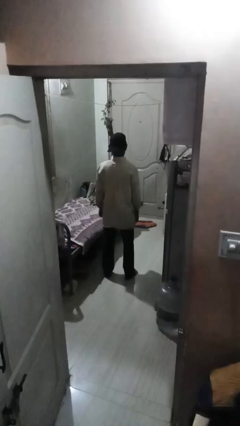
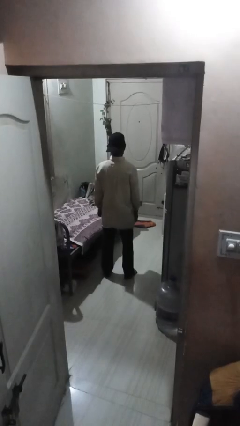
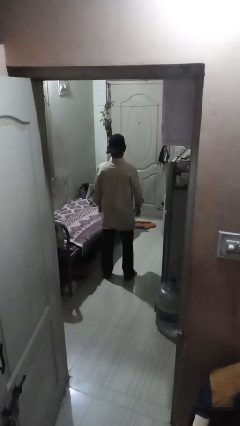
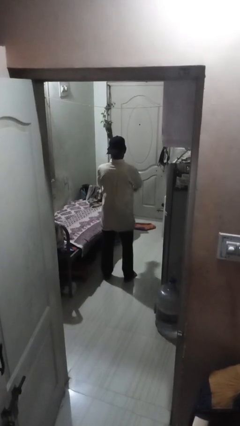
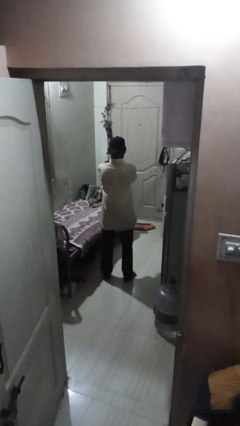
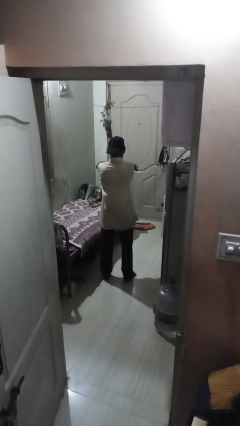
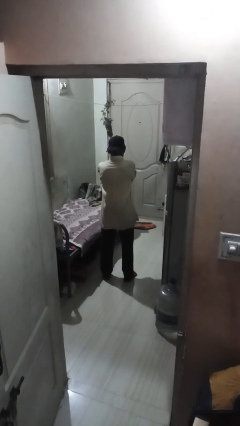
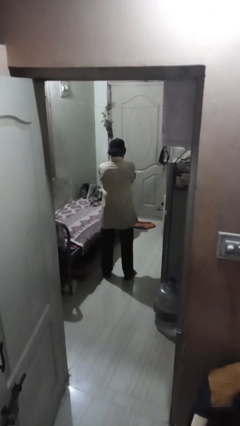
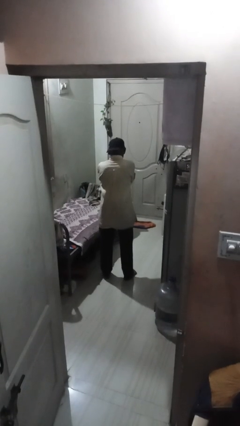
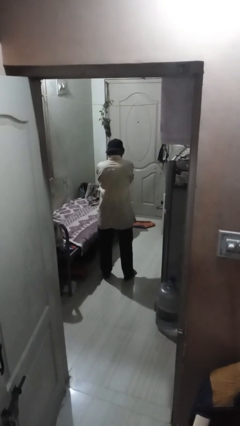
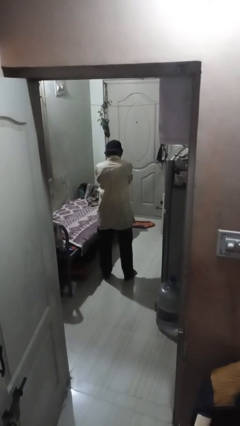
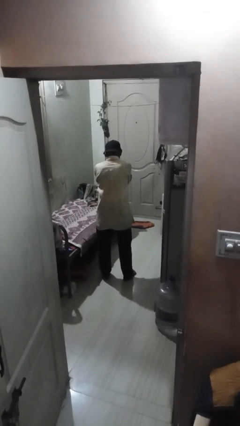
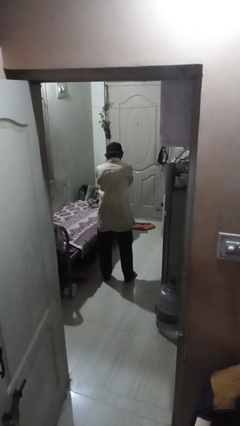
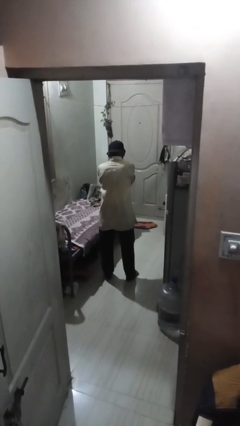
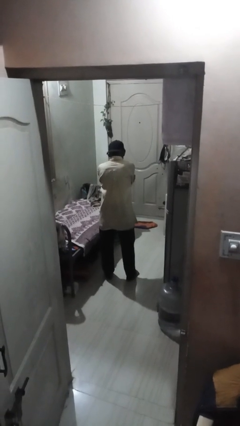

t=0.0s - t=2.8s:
person crosses arms

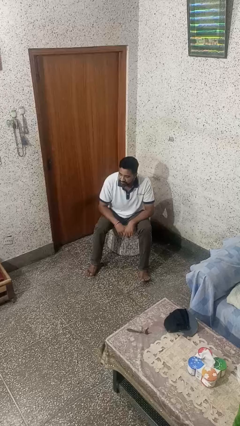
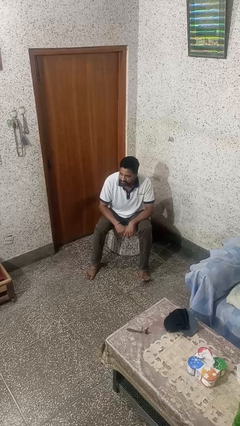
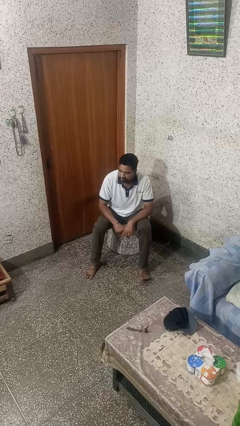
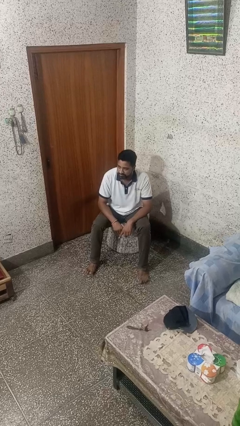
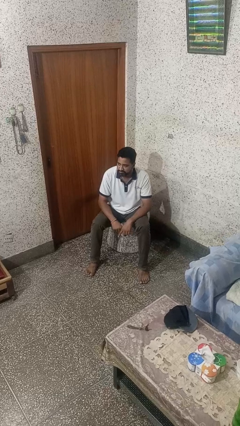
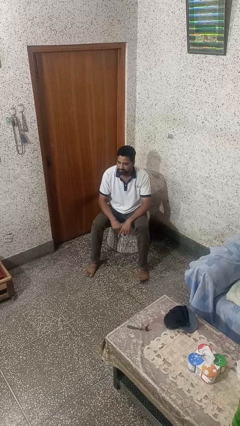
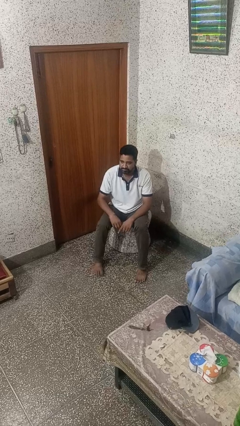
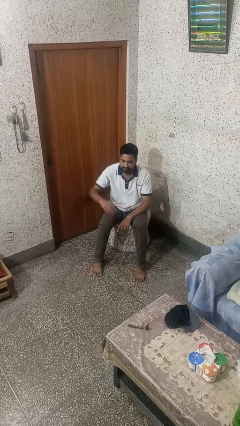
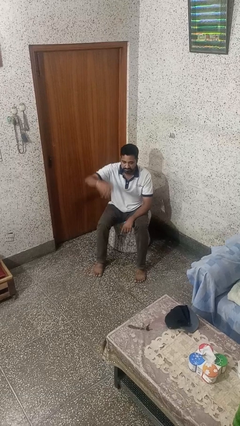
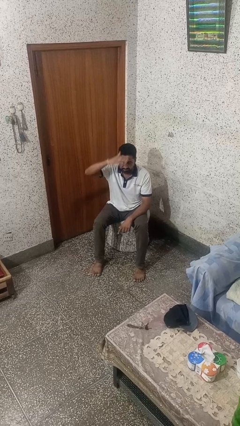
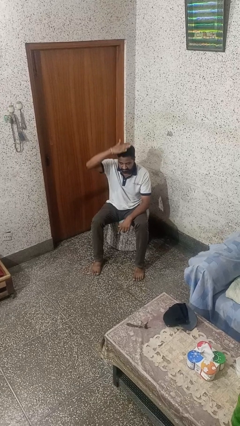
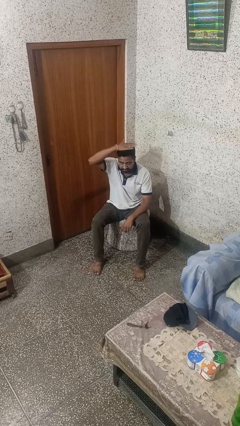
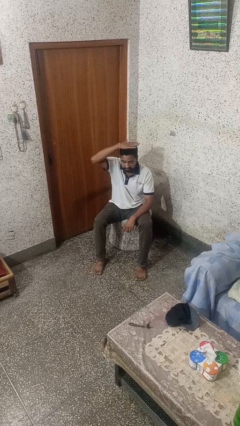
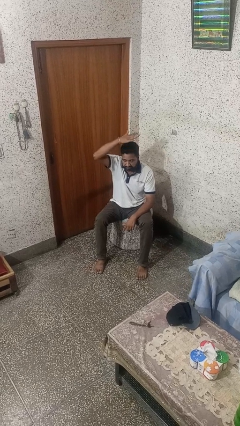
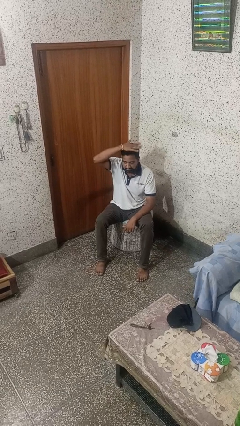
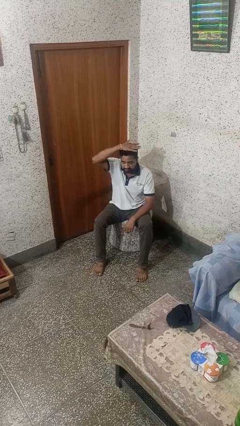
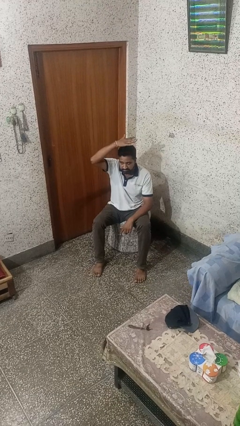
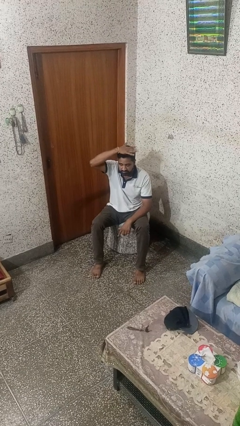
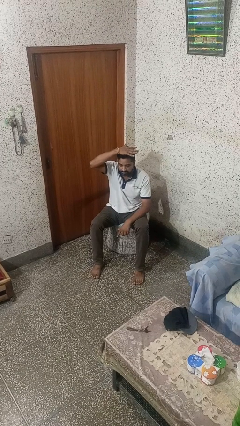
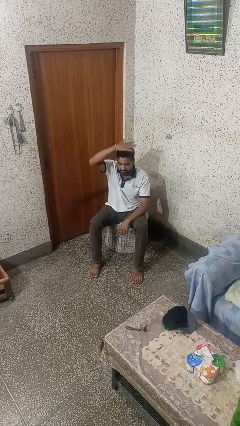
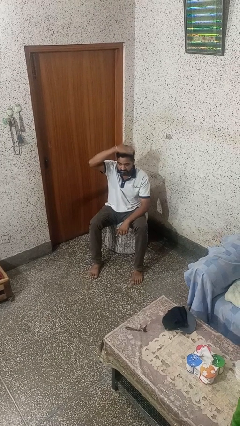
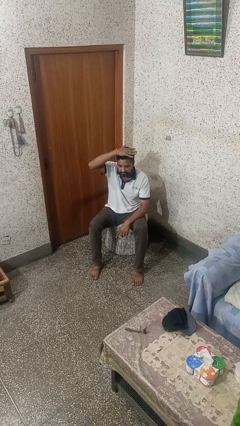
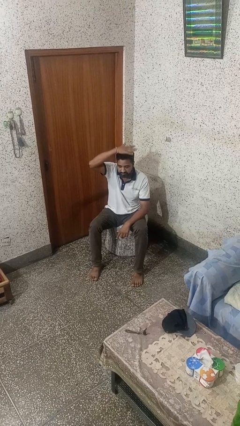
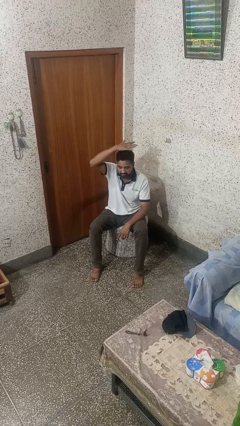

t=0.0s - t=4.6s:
person gestures cut

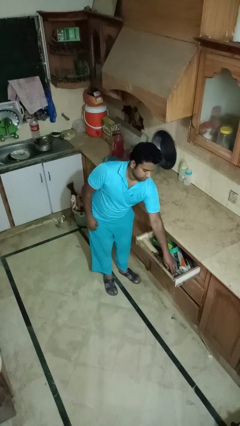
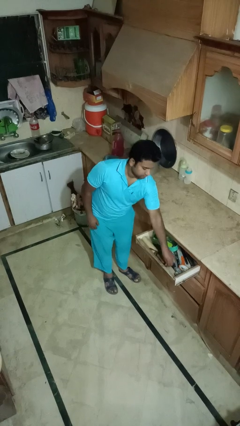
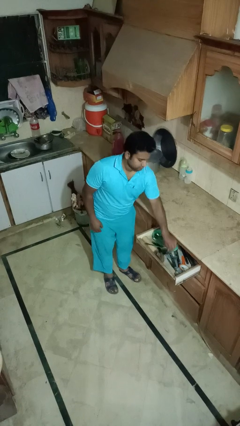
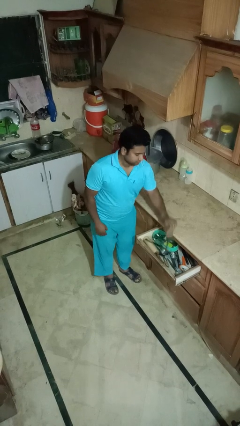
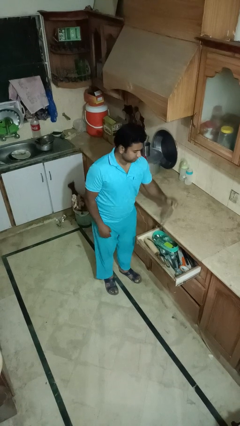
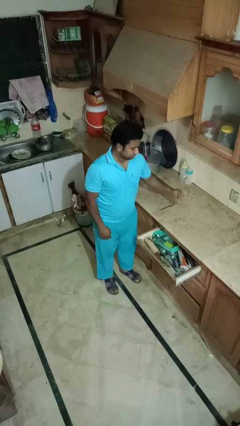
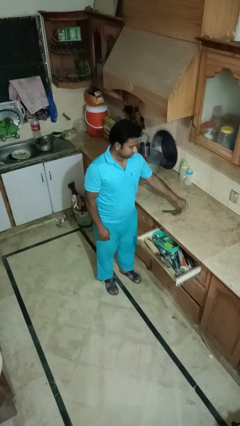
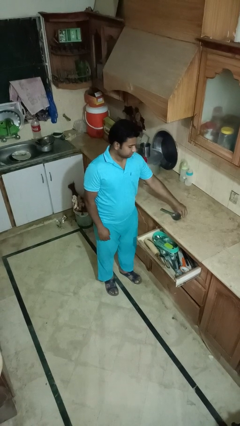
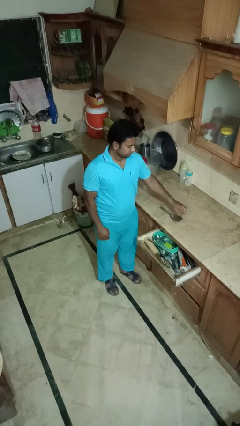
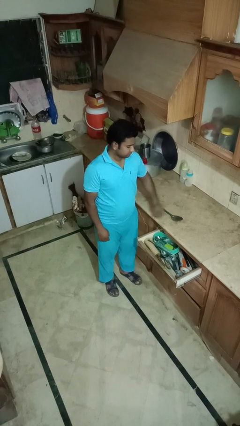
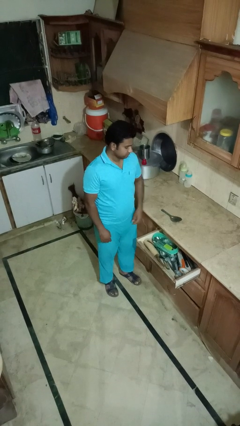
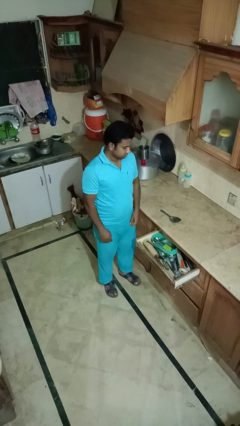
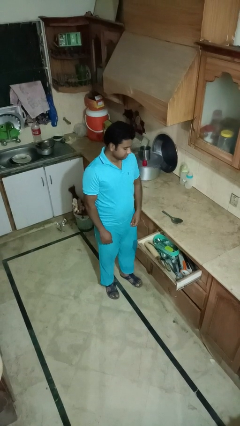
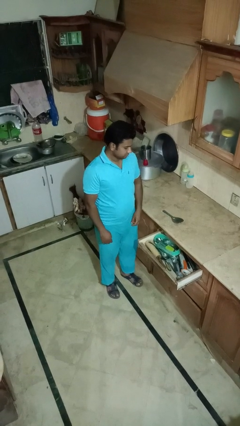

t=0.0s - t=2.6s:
person takes object from kitchen drawer

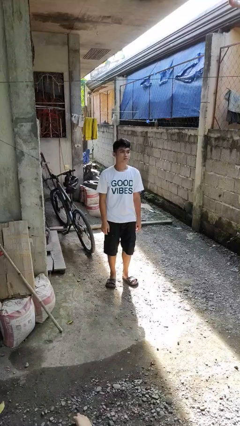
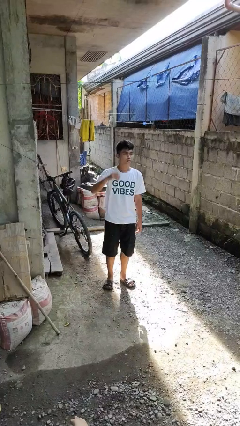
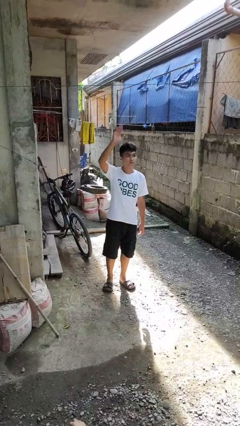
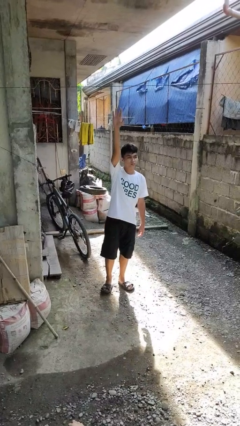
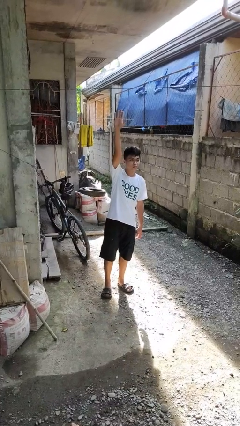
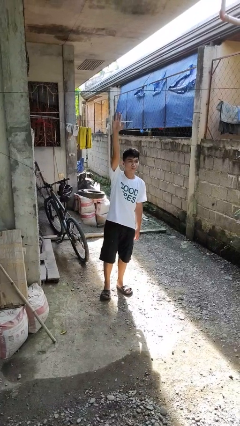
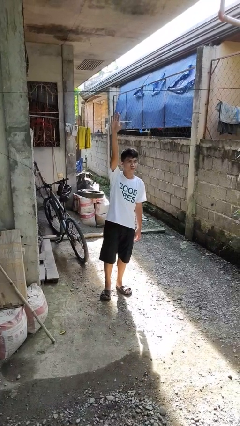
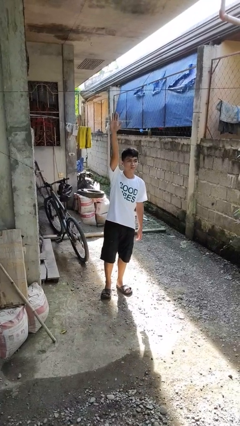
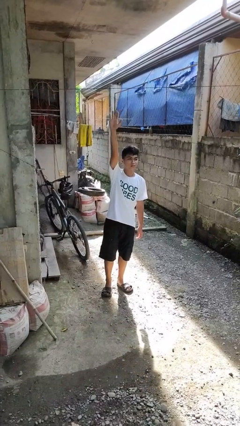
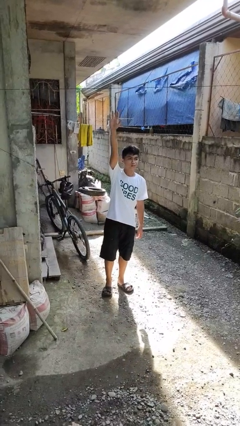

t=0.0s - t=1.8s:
person gestures raise hand

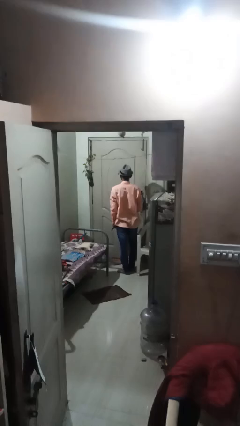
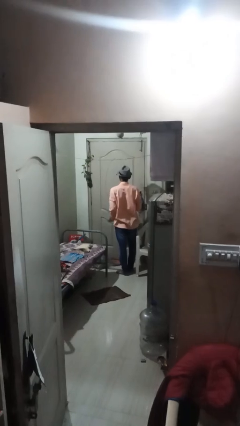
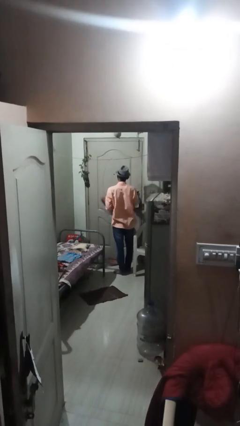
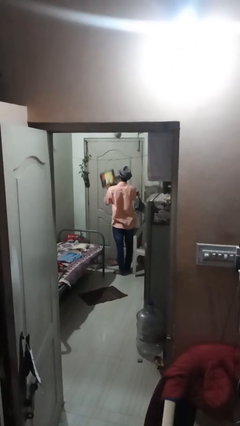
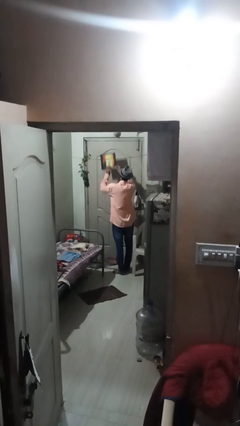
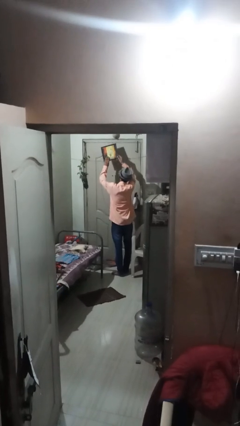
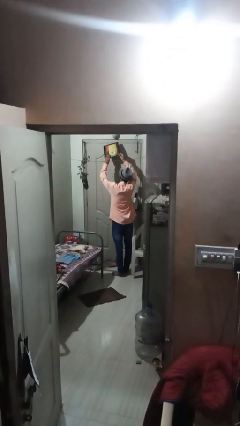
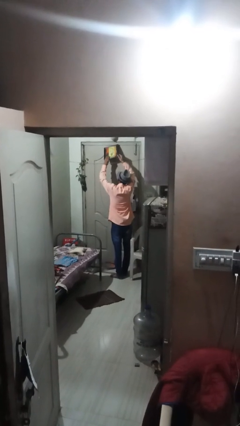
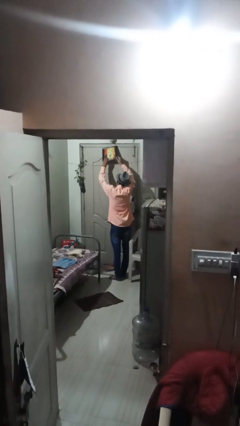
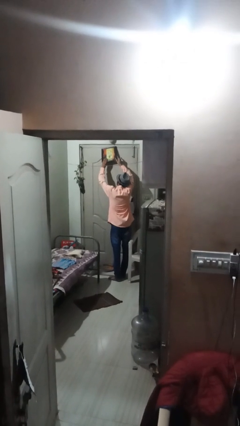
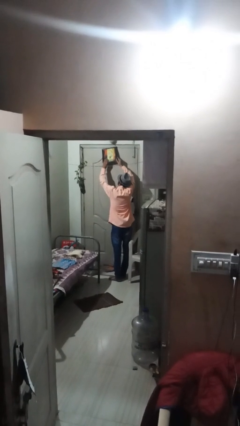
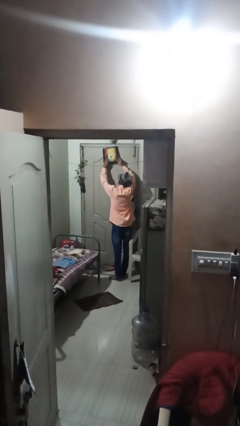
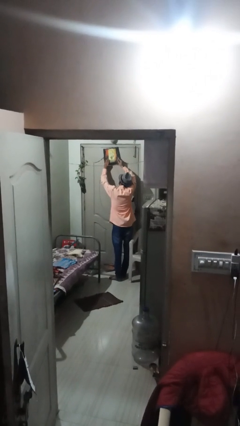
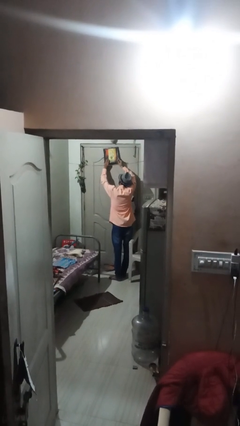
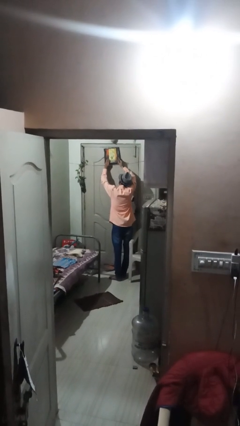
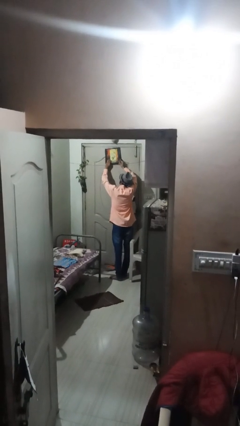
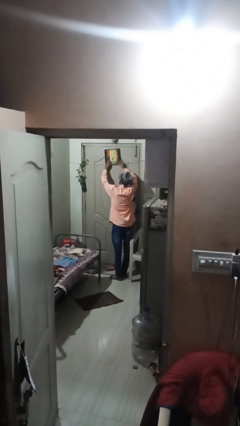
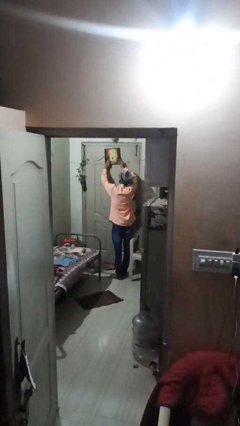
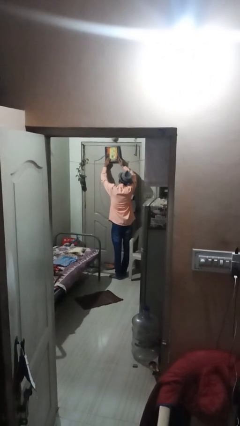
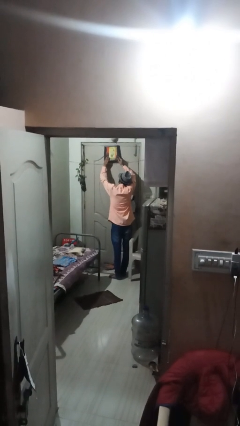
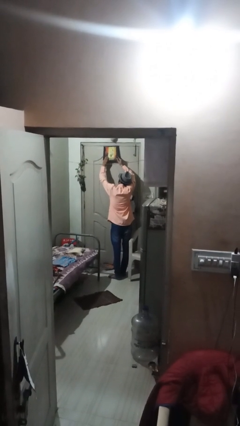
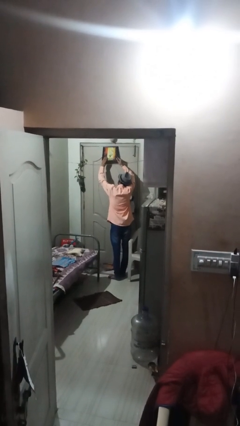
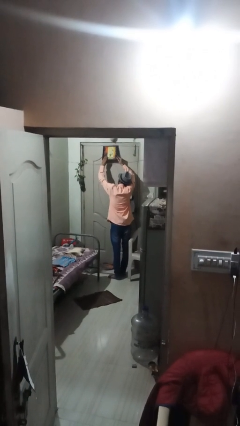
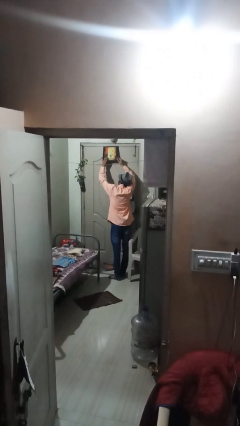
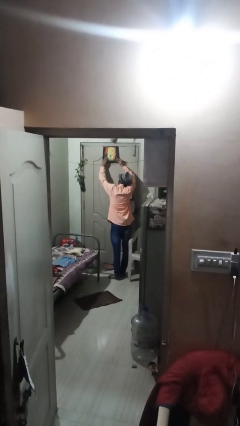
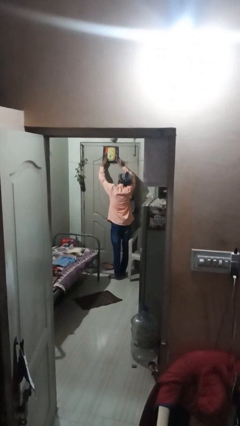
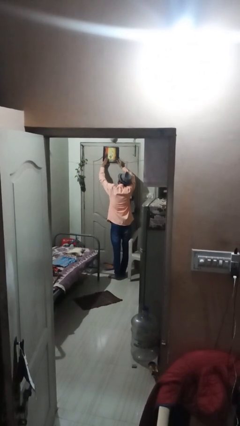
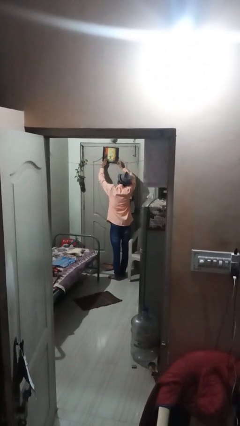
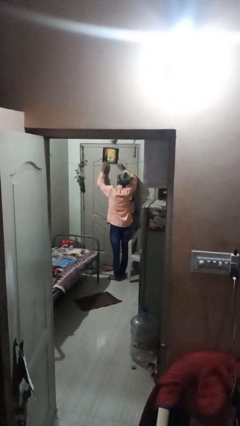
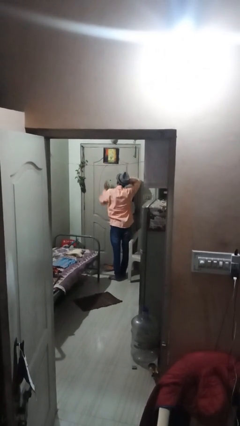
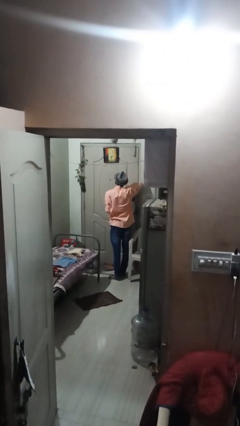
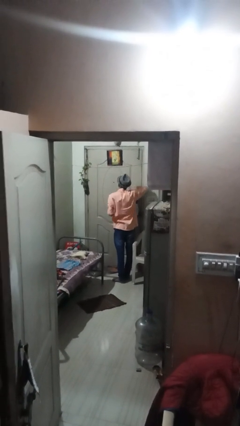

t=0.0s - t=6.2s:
person puts up picture frame
